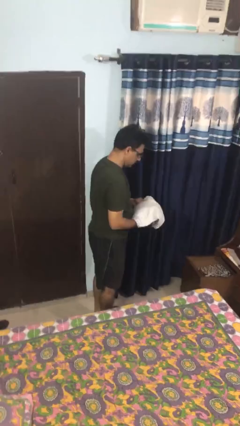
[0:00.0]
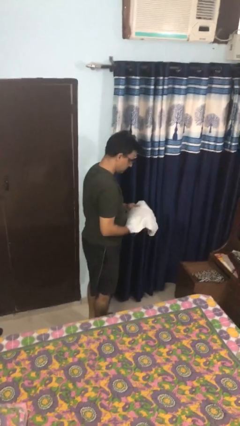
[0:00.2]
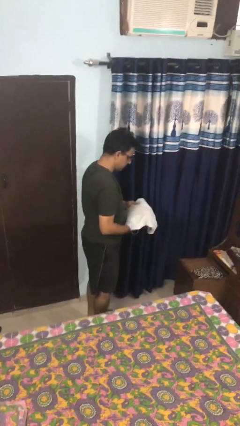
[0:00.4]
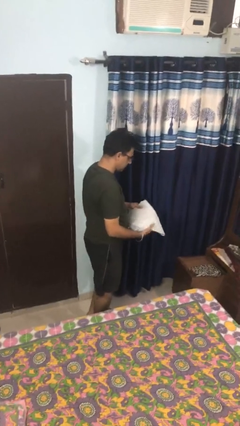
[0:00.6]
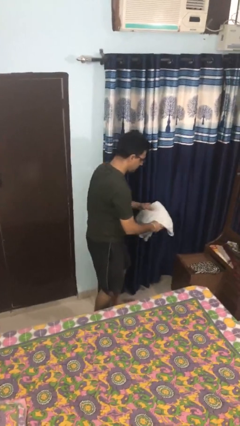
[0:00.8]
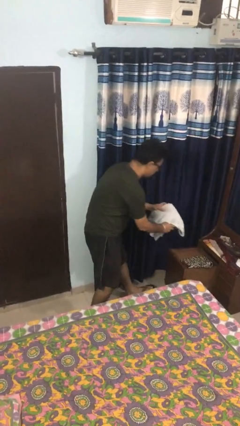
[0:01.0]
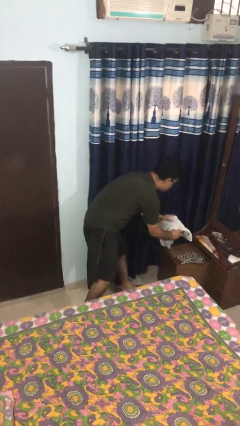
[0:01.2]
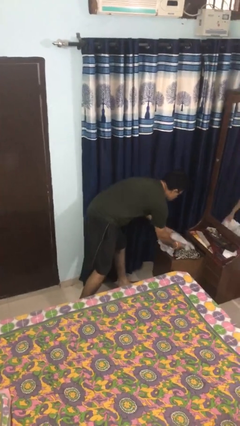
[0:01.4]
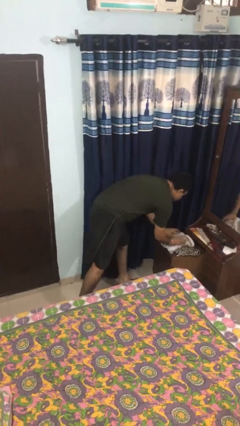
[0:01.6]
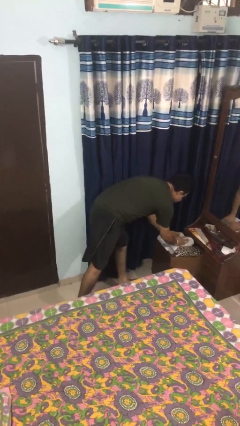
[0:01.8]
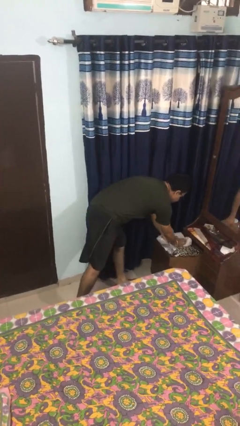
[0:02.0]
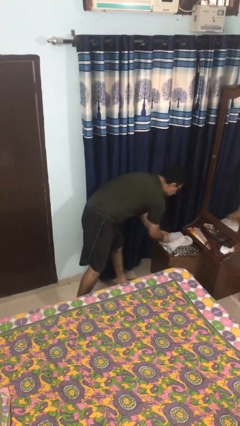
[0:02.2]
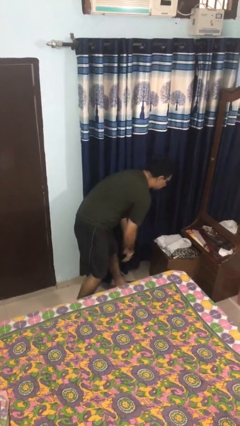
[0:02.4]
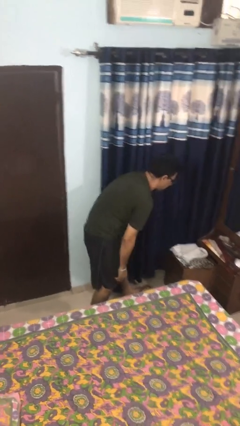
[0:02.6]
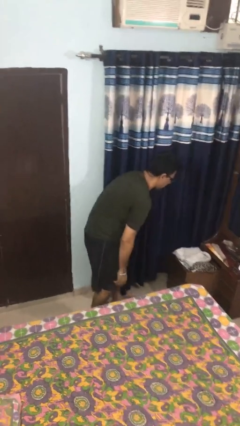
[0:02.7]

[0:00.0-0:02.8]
person puts clothes into dresser

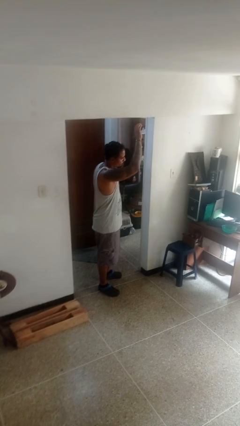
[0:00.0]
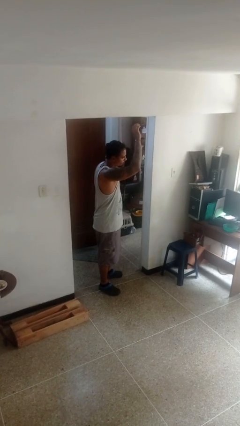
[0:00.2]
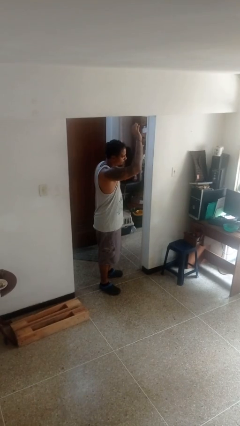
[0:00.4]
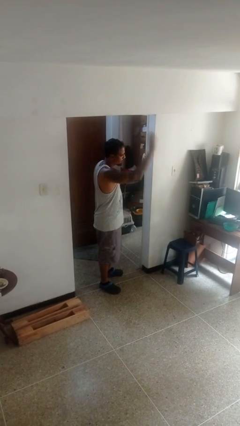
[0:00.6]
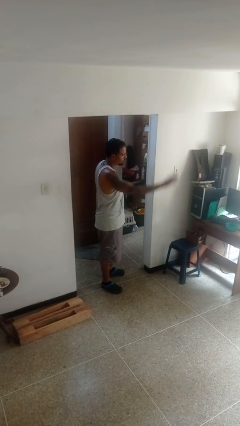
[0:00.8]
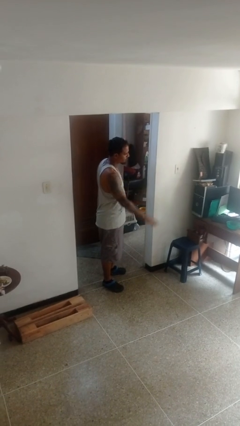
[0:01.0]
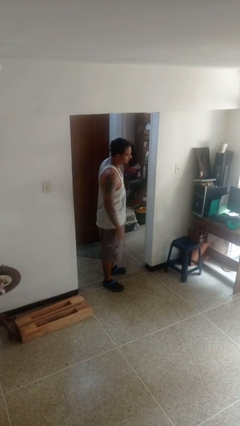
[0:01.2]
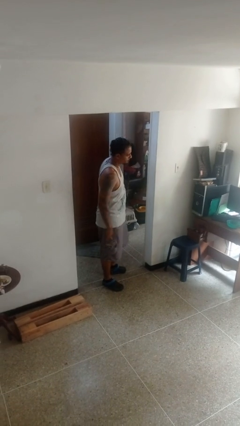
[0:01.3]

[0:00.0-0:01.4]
person gestures swipe down

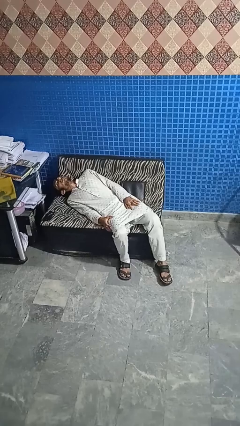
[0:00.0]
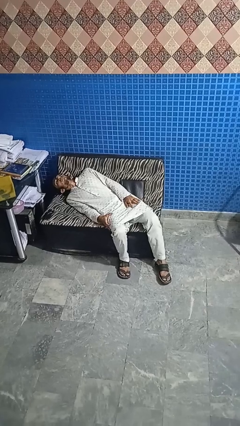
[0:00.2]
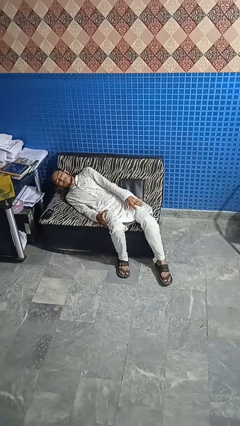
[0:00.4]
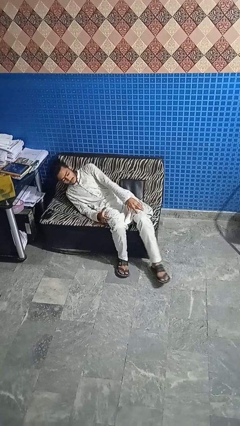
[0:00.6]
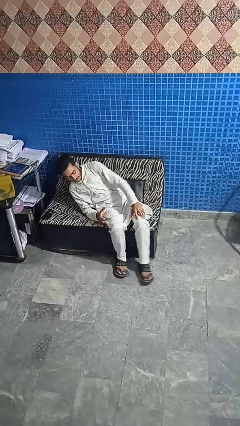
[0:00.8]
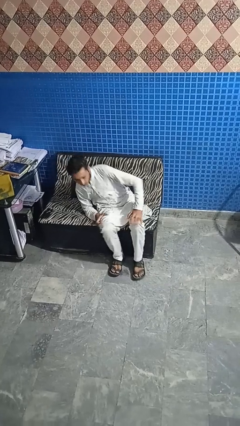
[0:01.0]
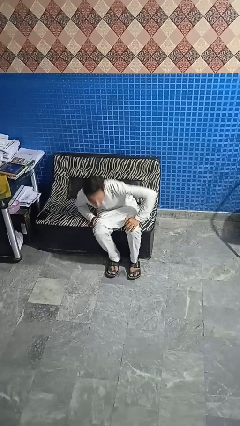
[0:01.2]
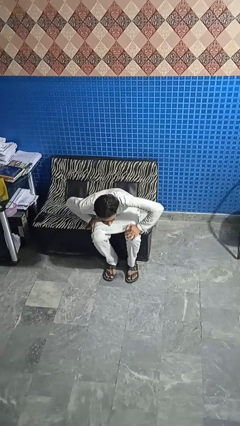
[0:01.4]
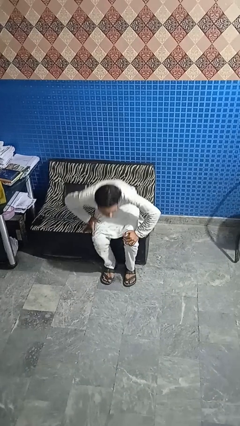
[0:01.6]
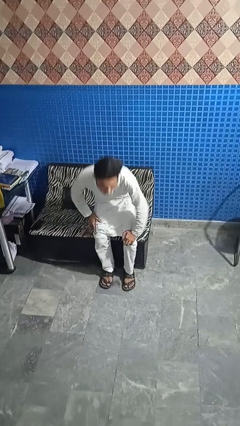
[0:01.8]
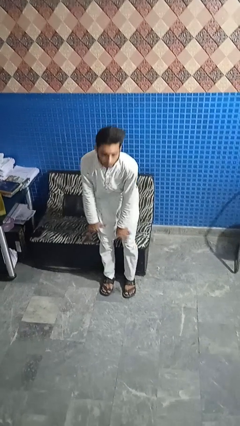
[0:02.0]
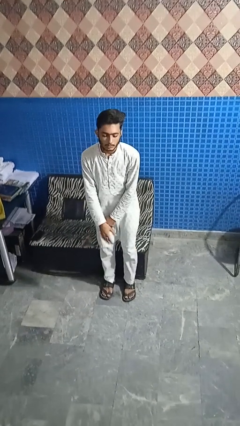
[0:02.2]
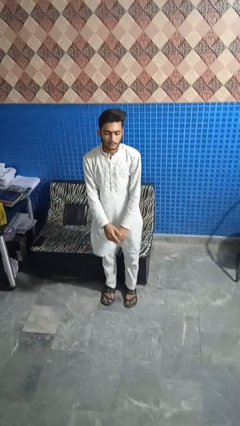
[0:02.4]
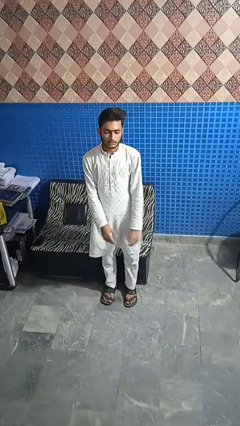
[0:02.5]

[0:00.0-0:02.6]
person stands up

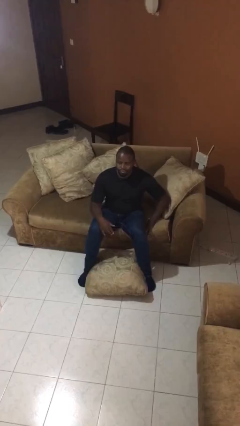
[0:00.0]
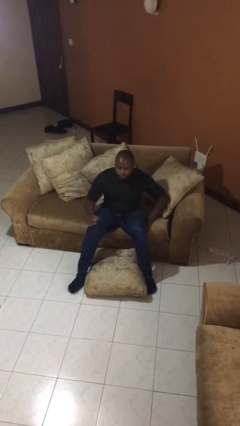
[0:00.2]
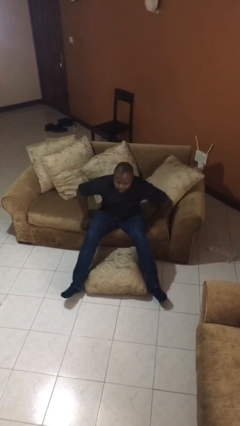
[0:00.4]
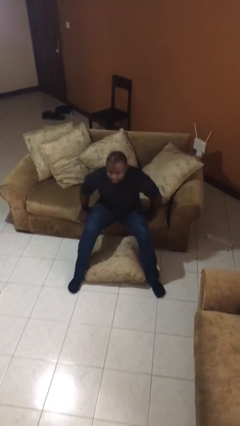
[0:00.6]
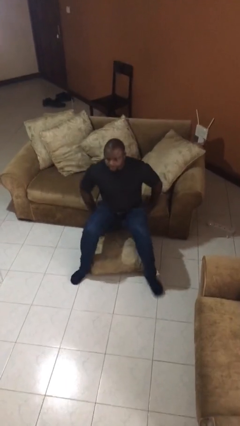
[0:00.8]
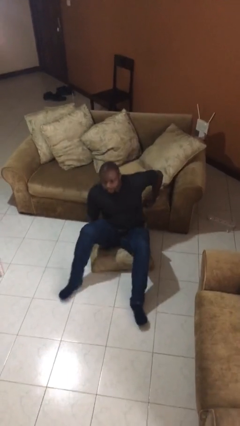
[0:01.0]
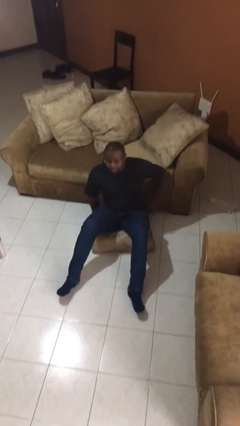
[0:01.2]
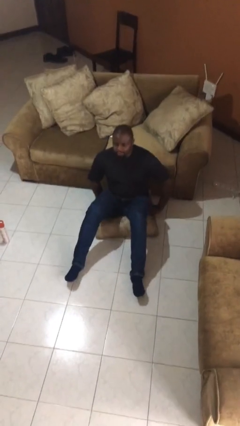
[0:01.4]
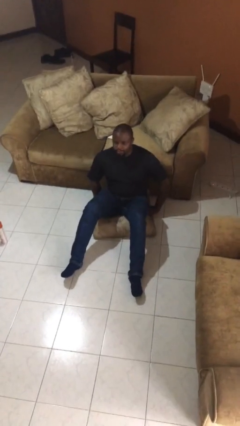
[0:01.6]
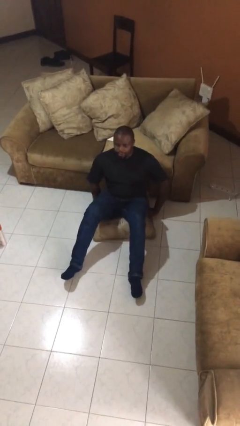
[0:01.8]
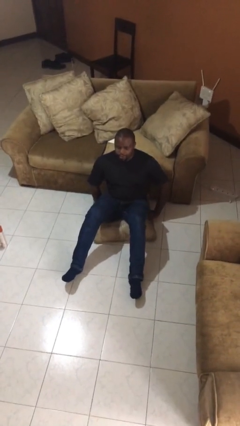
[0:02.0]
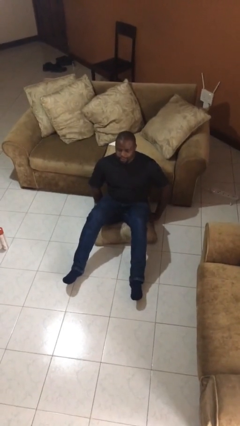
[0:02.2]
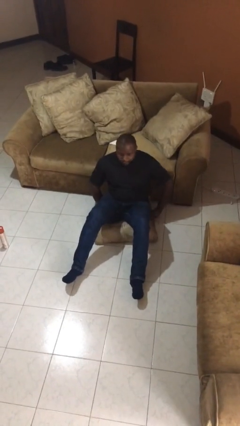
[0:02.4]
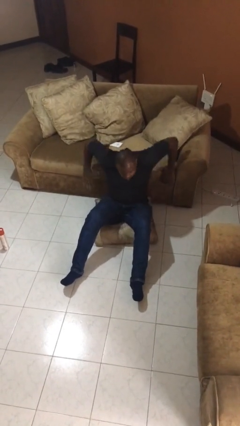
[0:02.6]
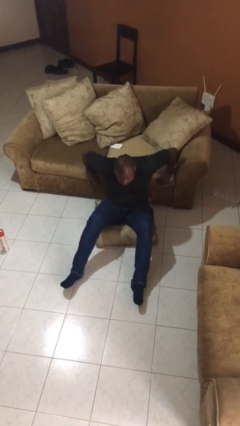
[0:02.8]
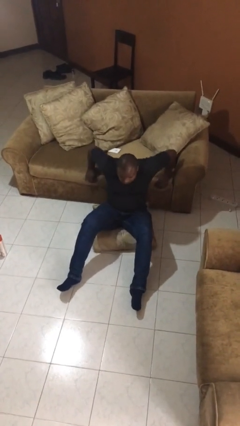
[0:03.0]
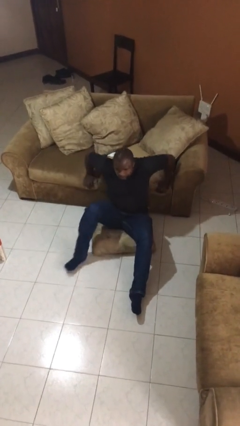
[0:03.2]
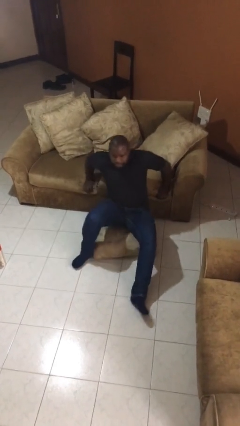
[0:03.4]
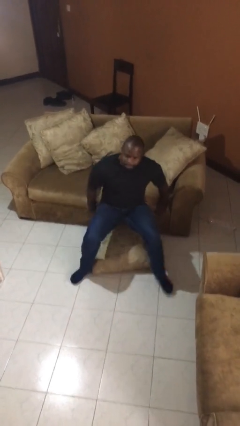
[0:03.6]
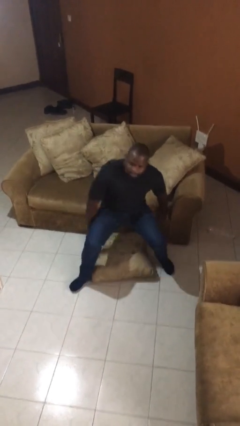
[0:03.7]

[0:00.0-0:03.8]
person falls from chair

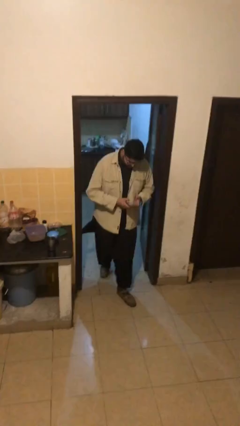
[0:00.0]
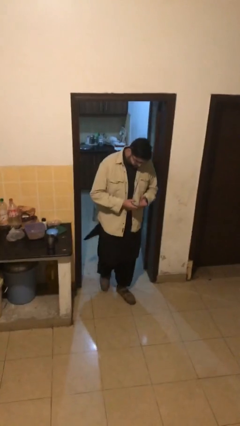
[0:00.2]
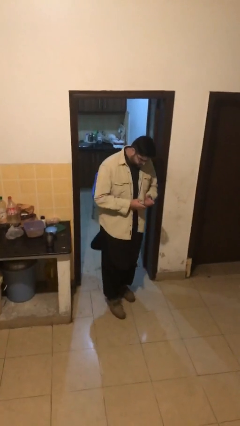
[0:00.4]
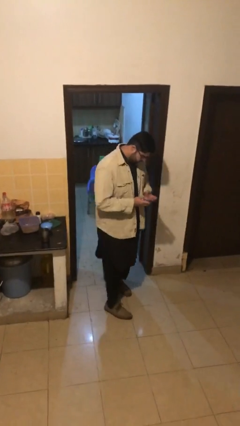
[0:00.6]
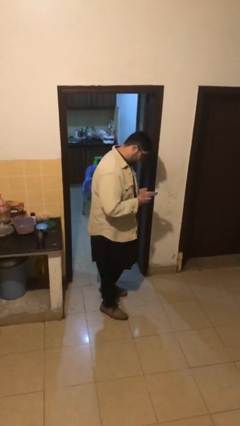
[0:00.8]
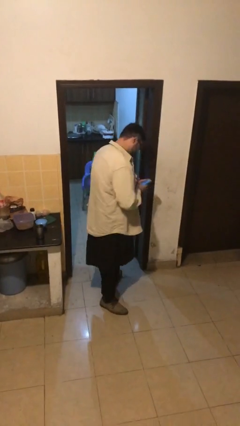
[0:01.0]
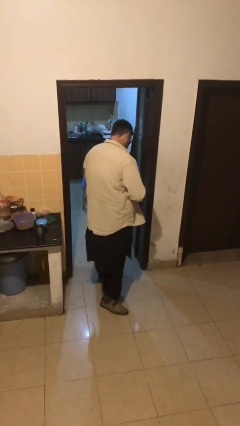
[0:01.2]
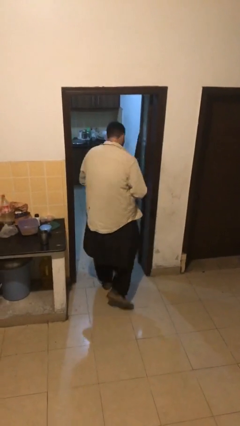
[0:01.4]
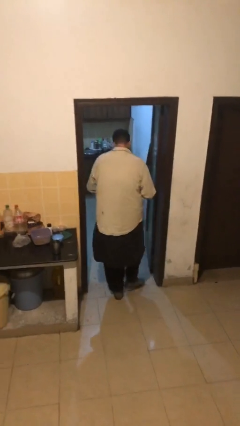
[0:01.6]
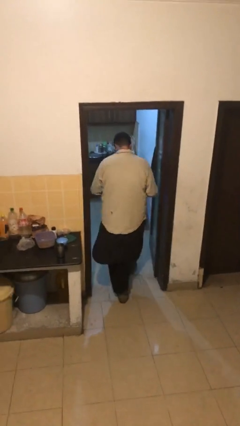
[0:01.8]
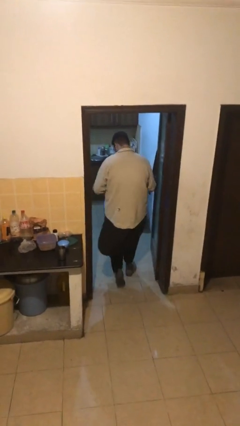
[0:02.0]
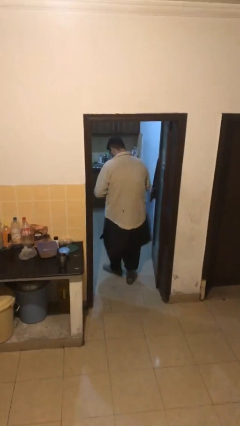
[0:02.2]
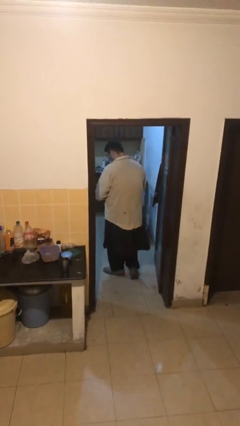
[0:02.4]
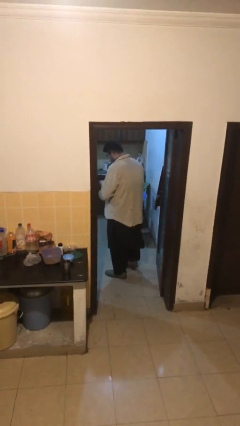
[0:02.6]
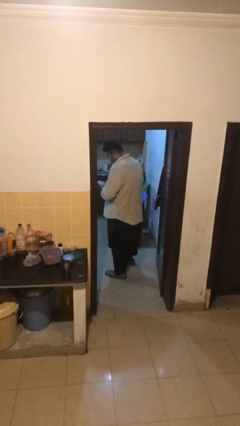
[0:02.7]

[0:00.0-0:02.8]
person exits scene through structure

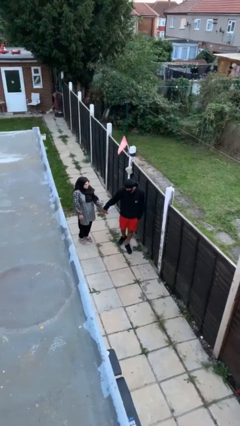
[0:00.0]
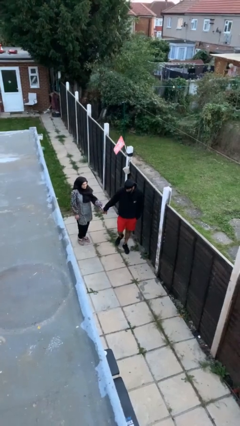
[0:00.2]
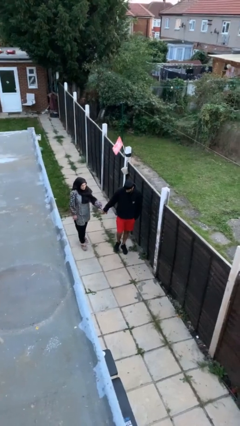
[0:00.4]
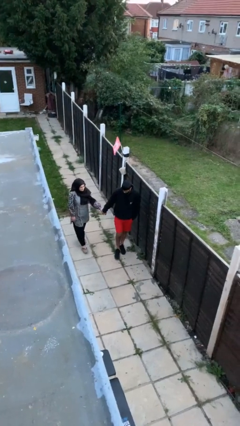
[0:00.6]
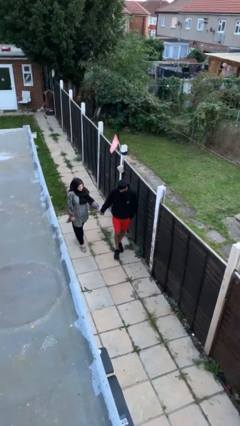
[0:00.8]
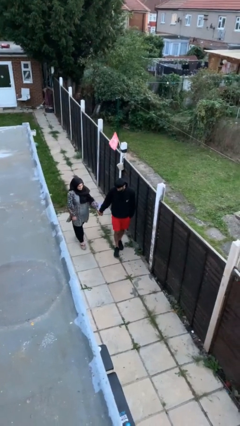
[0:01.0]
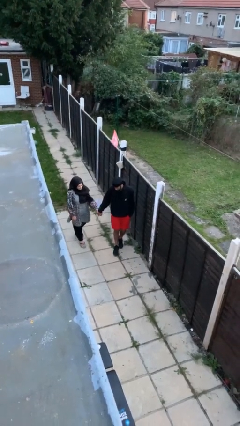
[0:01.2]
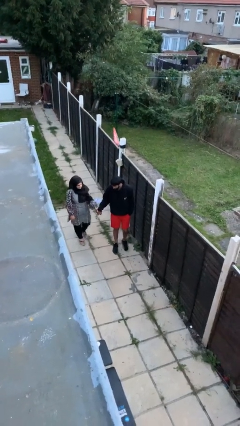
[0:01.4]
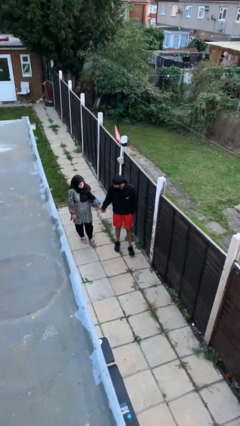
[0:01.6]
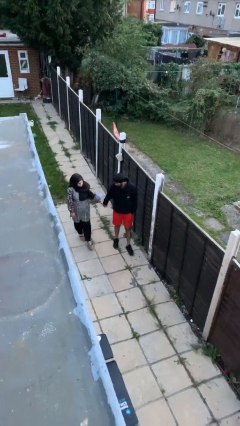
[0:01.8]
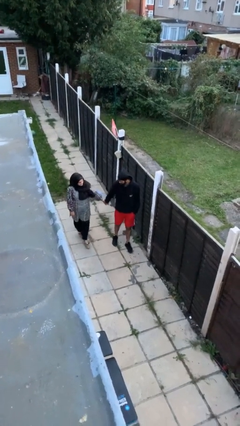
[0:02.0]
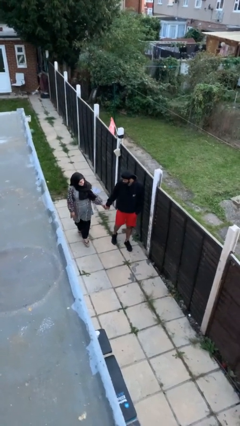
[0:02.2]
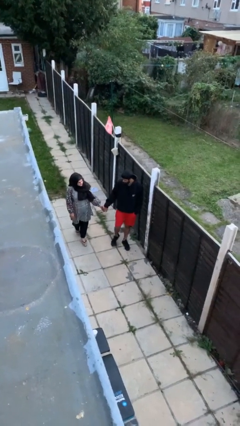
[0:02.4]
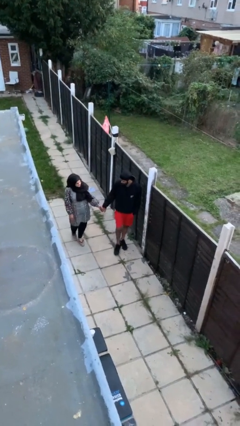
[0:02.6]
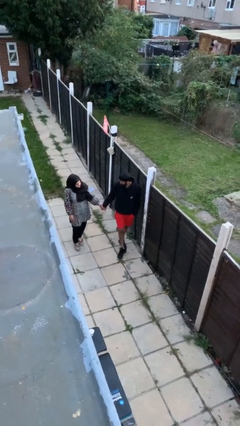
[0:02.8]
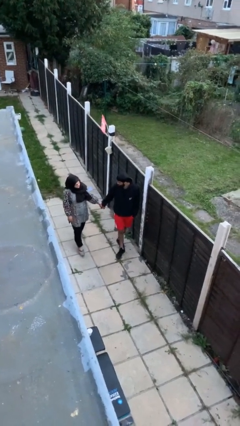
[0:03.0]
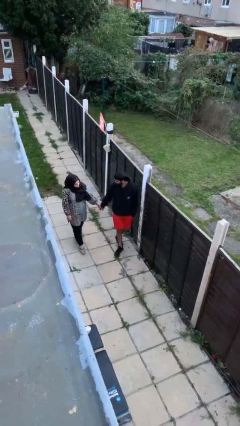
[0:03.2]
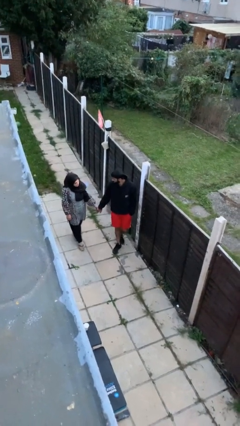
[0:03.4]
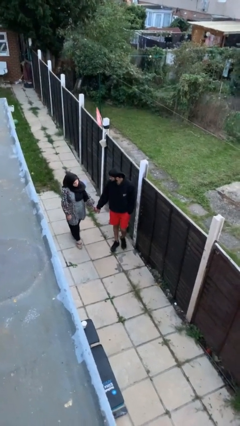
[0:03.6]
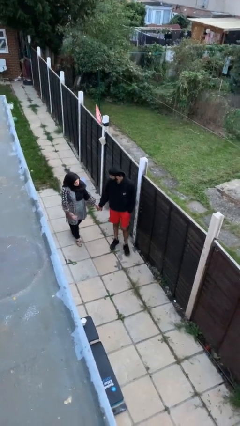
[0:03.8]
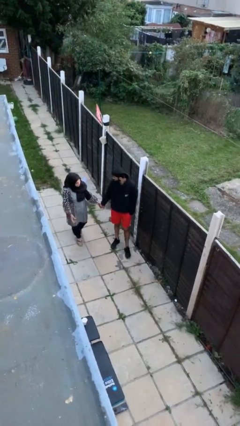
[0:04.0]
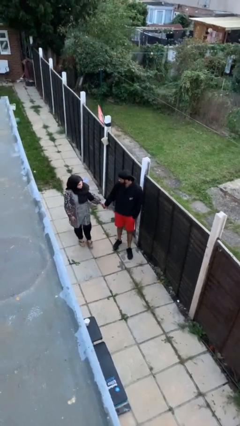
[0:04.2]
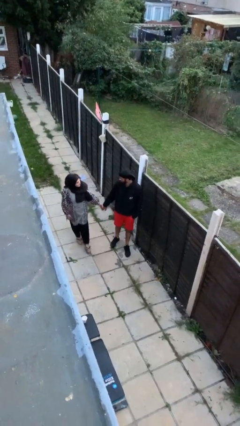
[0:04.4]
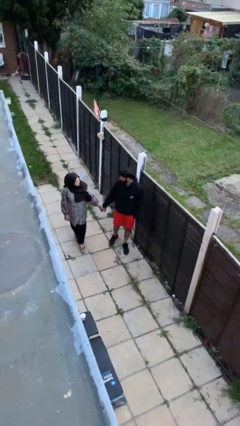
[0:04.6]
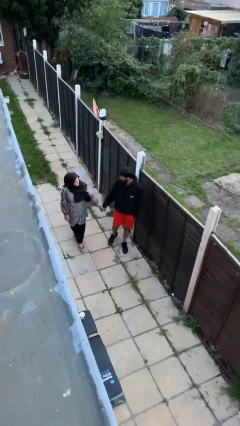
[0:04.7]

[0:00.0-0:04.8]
person holds hand
